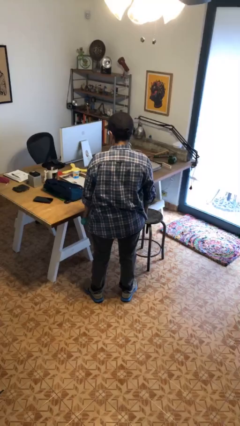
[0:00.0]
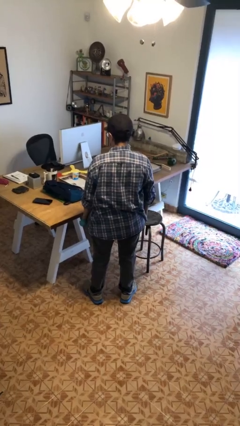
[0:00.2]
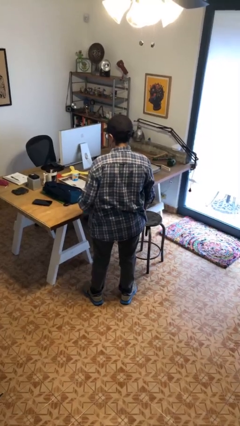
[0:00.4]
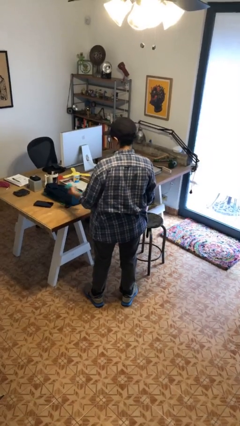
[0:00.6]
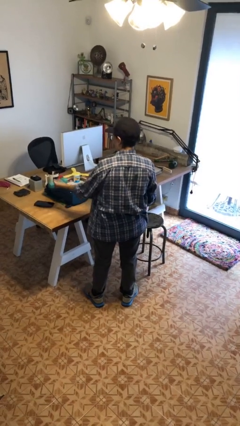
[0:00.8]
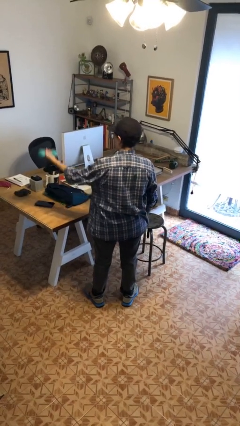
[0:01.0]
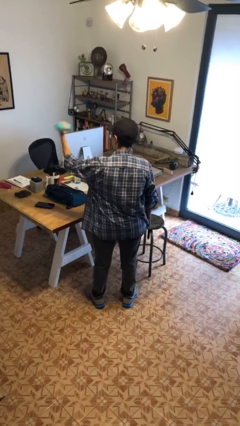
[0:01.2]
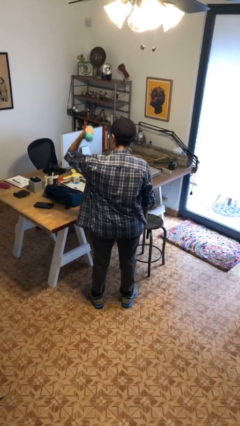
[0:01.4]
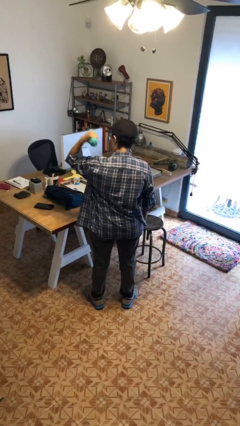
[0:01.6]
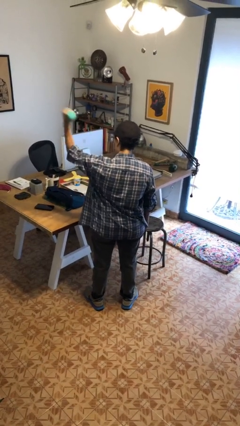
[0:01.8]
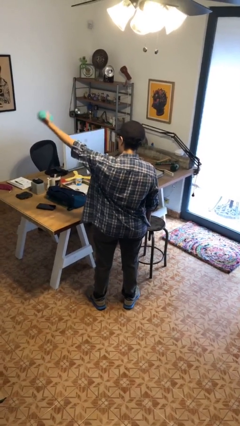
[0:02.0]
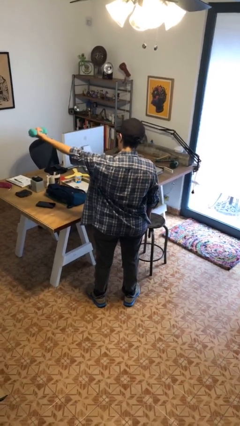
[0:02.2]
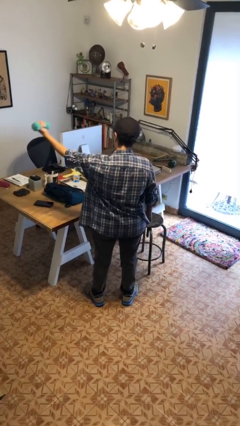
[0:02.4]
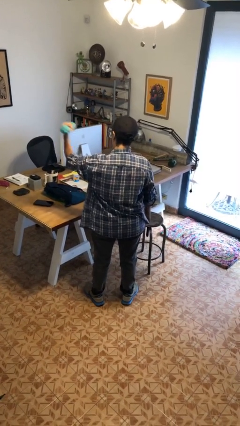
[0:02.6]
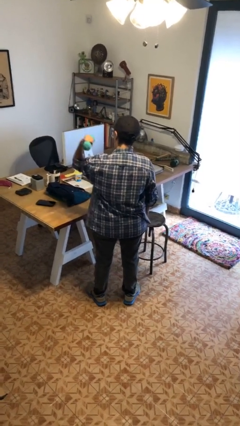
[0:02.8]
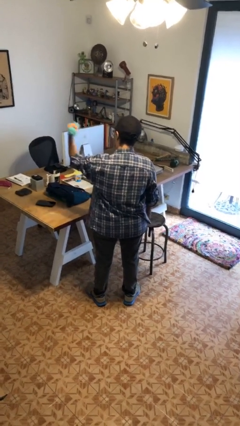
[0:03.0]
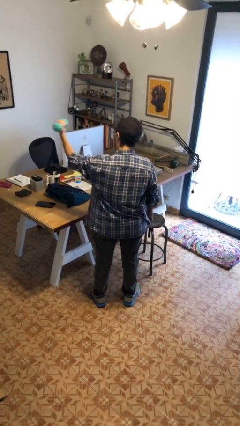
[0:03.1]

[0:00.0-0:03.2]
person lifts dumbbells

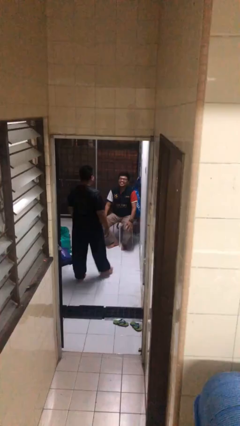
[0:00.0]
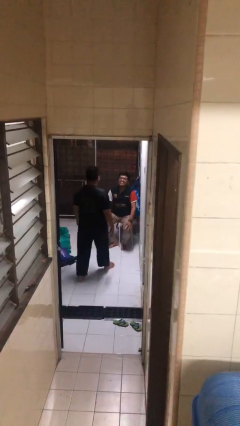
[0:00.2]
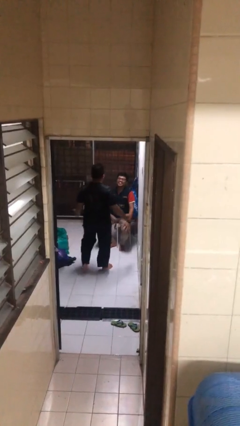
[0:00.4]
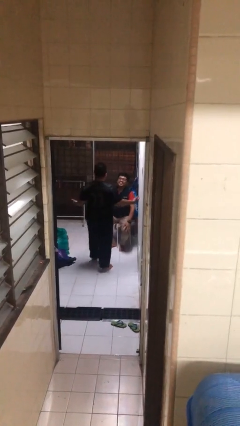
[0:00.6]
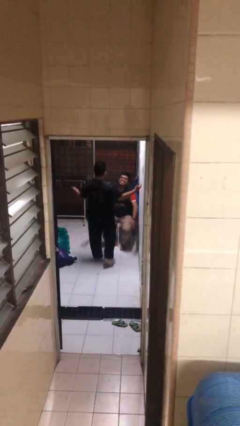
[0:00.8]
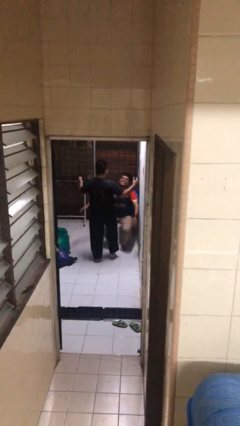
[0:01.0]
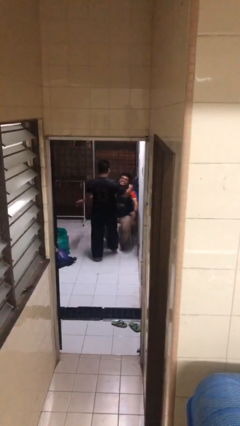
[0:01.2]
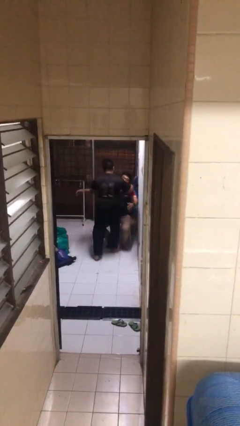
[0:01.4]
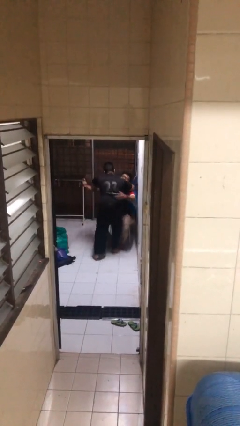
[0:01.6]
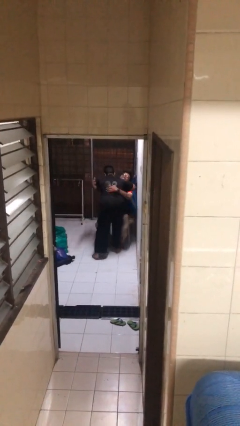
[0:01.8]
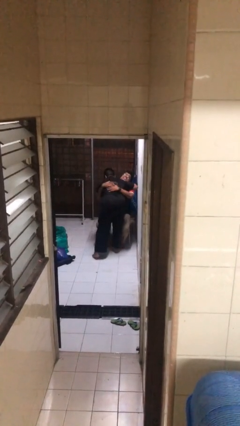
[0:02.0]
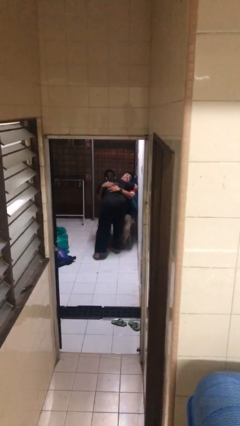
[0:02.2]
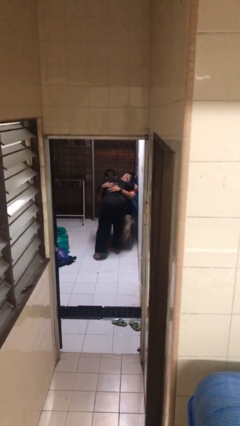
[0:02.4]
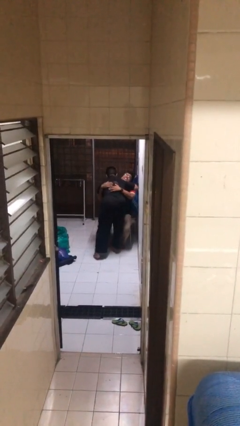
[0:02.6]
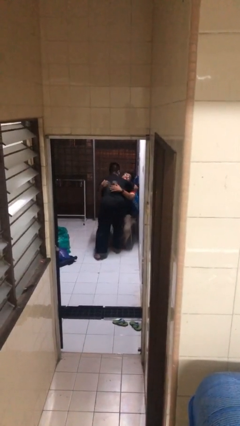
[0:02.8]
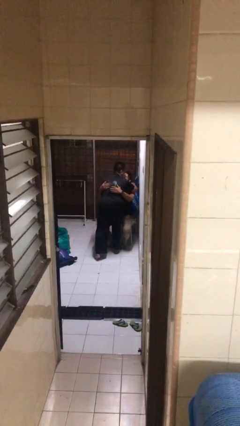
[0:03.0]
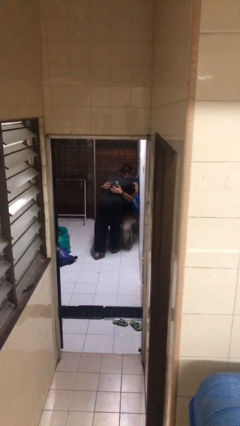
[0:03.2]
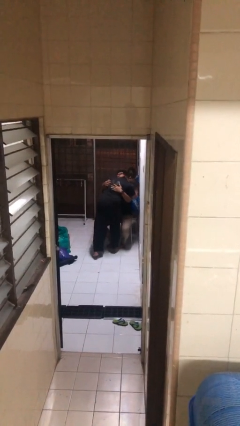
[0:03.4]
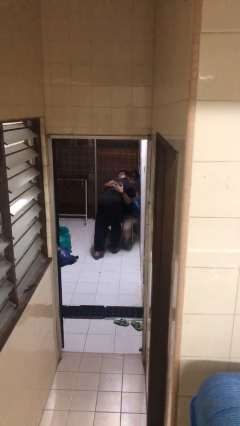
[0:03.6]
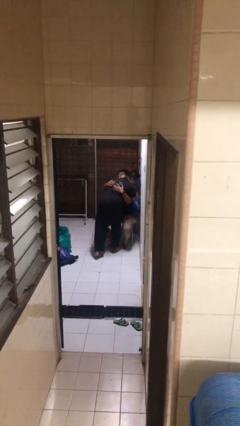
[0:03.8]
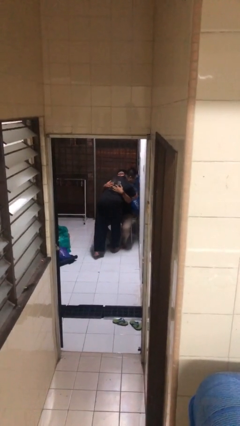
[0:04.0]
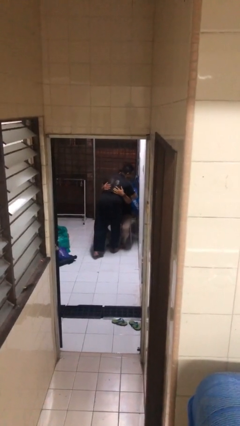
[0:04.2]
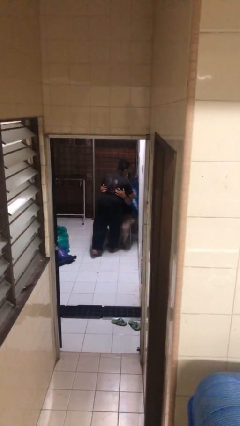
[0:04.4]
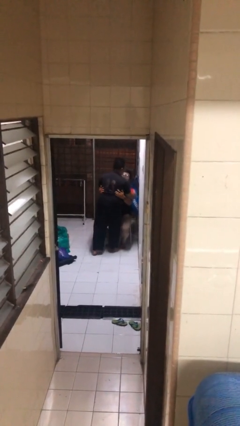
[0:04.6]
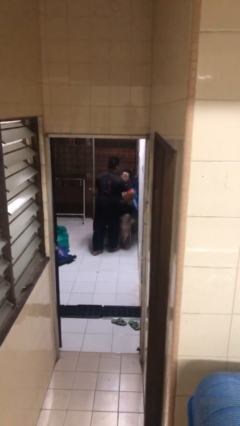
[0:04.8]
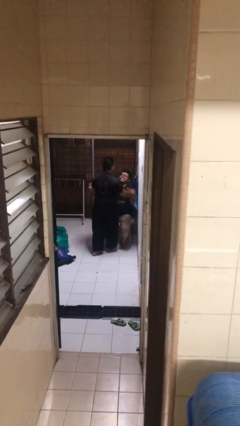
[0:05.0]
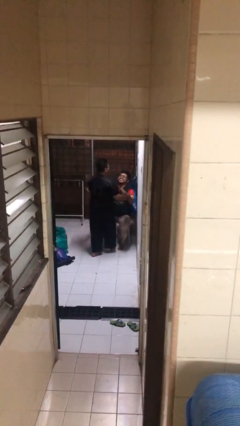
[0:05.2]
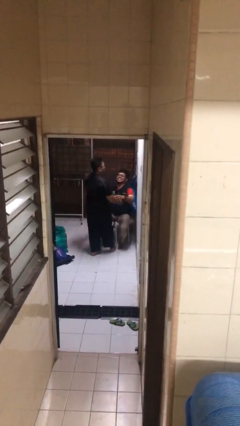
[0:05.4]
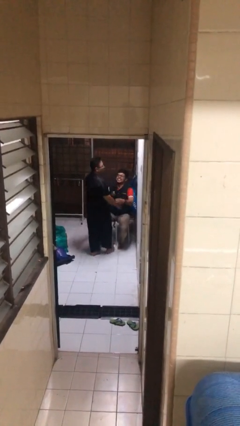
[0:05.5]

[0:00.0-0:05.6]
person embraces person

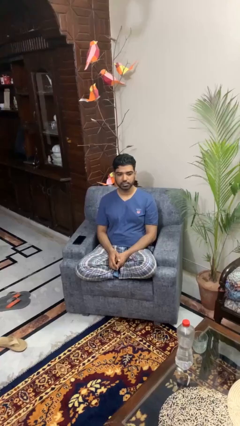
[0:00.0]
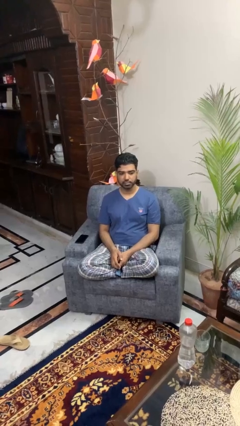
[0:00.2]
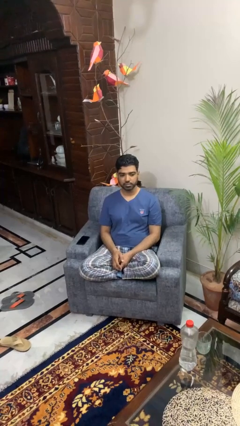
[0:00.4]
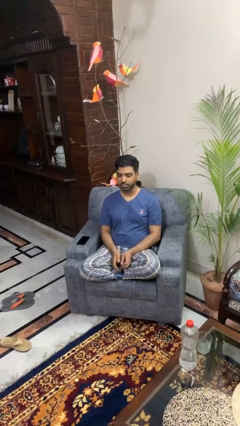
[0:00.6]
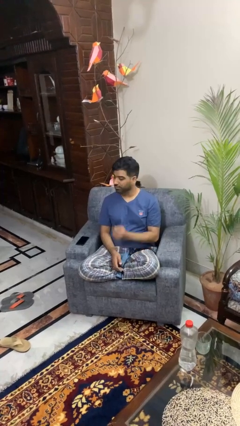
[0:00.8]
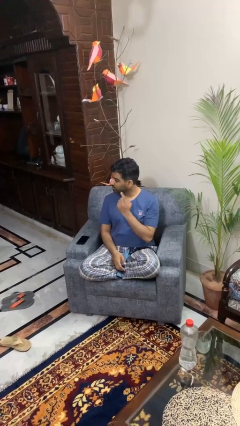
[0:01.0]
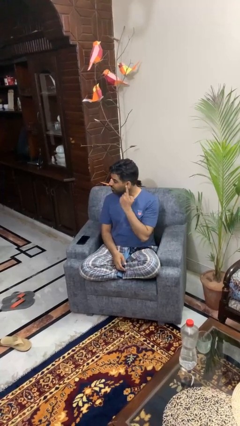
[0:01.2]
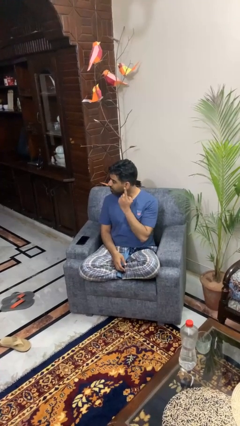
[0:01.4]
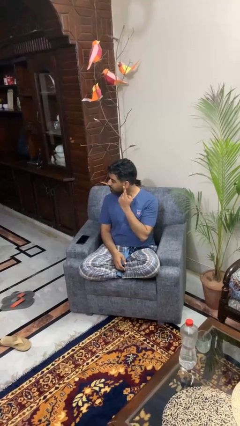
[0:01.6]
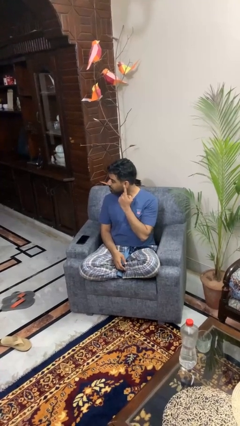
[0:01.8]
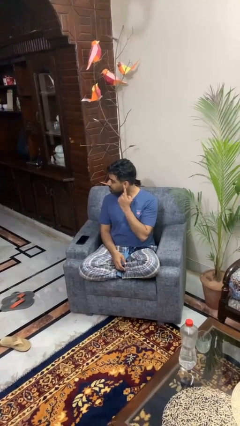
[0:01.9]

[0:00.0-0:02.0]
person gestures listen closely

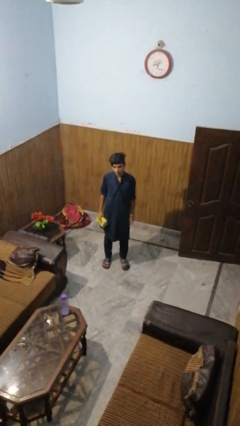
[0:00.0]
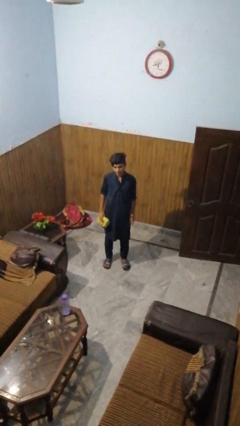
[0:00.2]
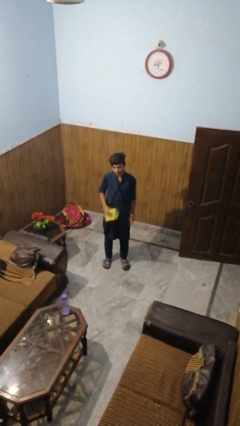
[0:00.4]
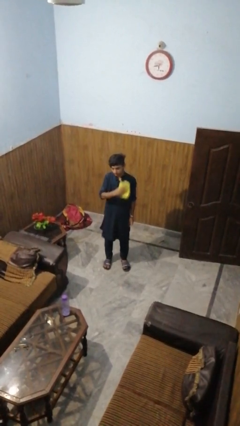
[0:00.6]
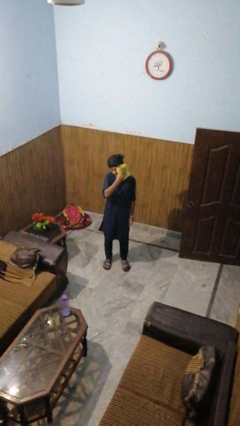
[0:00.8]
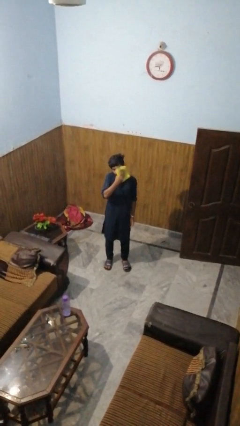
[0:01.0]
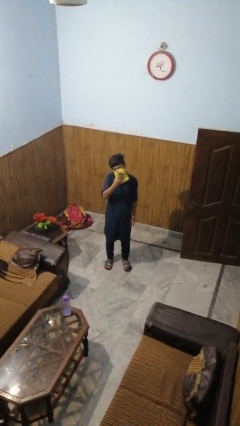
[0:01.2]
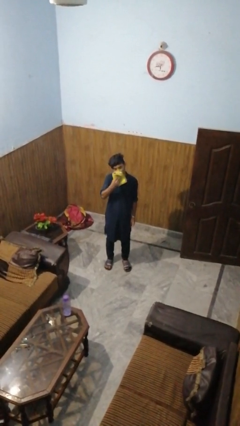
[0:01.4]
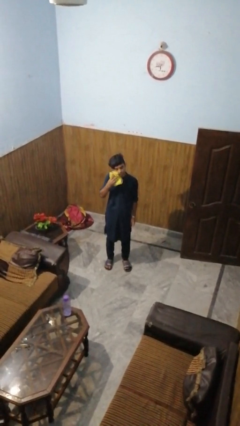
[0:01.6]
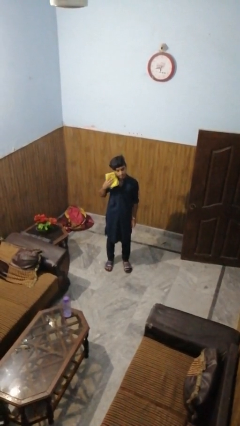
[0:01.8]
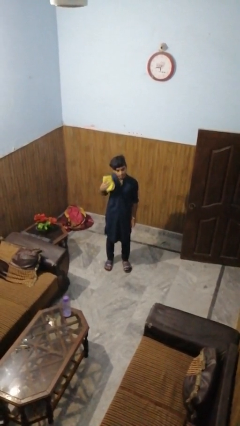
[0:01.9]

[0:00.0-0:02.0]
person wipes mouth with napkin

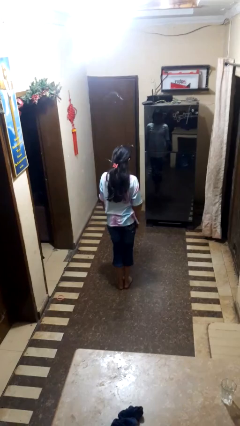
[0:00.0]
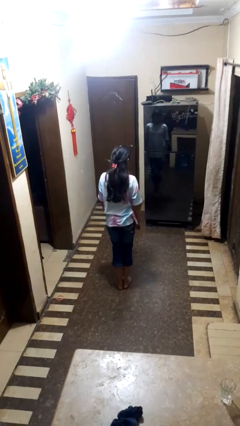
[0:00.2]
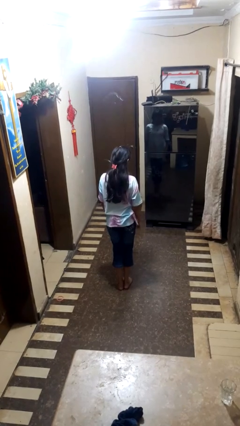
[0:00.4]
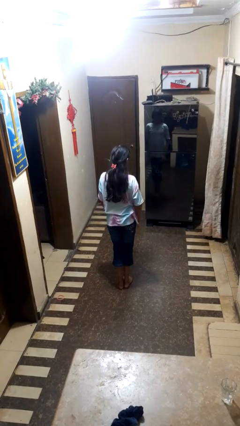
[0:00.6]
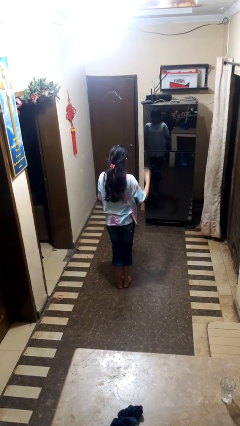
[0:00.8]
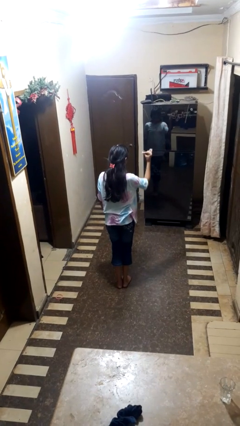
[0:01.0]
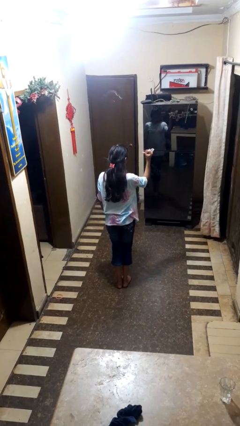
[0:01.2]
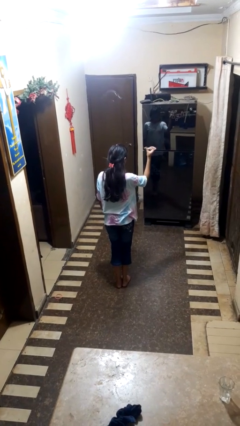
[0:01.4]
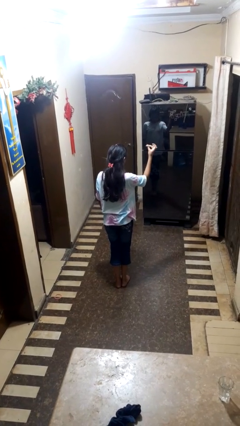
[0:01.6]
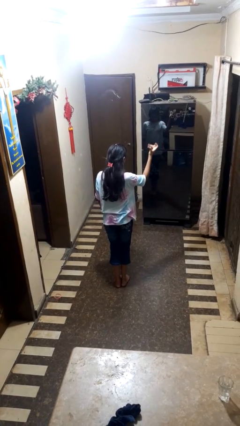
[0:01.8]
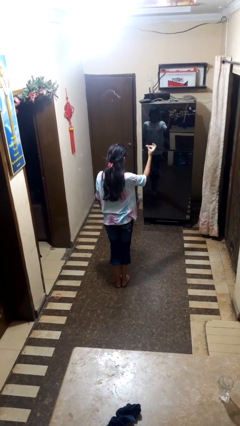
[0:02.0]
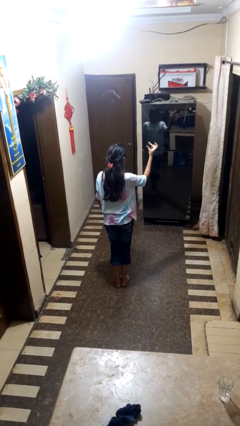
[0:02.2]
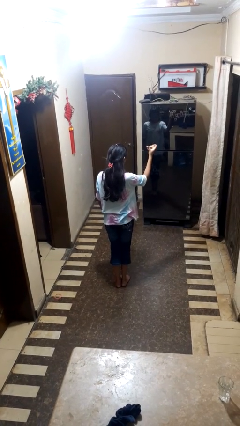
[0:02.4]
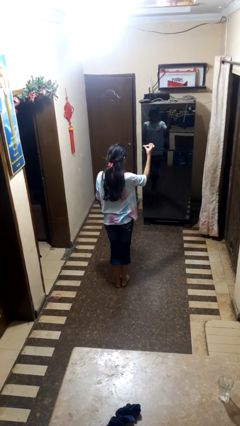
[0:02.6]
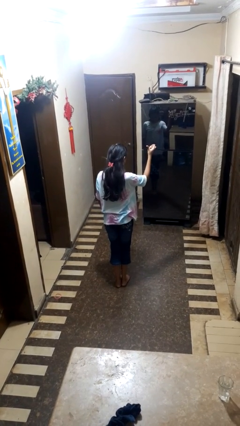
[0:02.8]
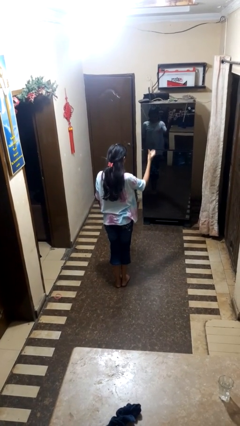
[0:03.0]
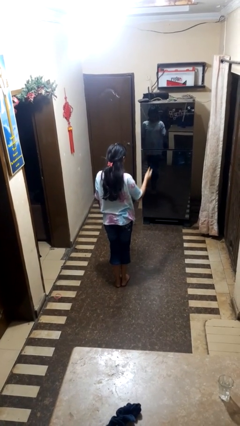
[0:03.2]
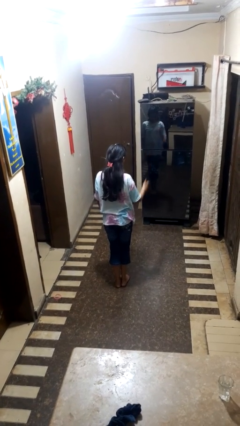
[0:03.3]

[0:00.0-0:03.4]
person snaps fingers

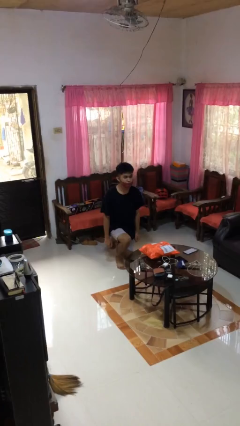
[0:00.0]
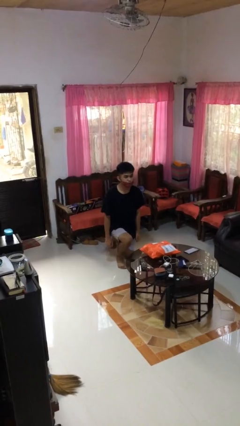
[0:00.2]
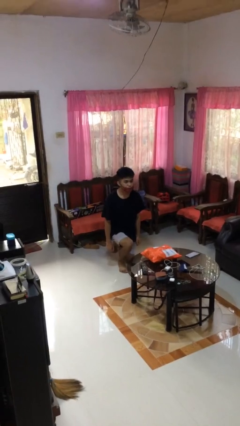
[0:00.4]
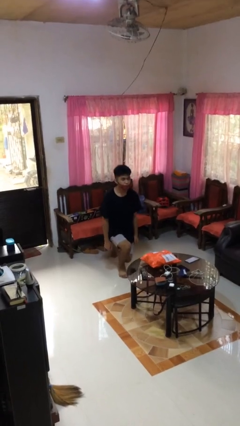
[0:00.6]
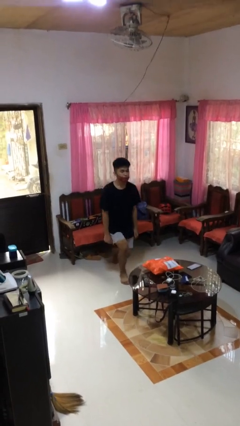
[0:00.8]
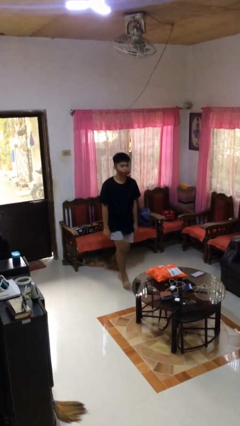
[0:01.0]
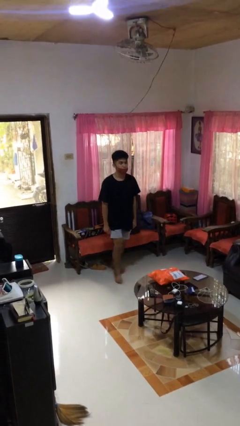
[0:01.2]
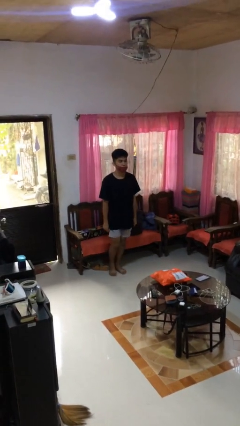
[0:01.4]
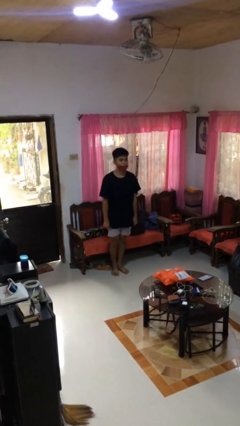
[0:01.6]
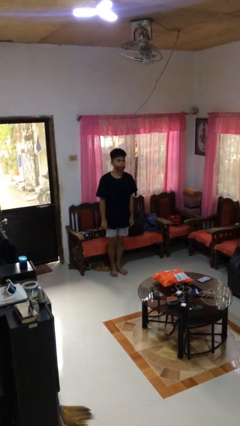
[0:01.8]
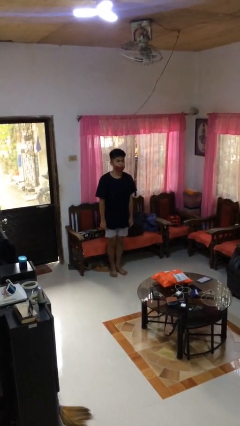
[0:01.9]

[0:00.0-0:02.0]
person stands up from floor
